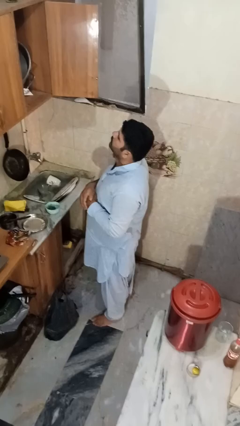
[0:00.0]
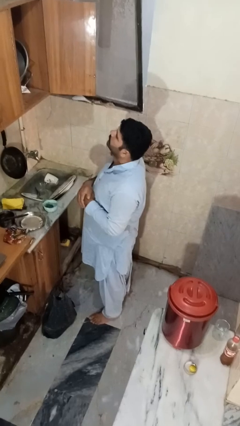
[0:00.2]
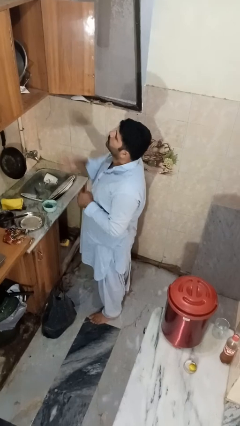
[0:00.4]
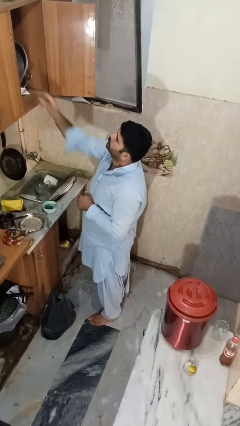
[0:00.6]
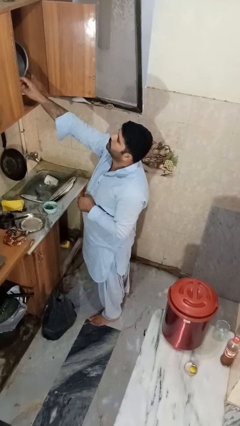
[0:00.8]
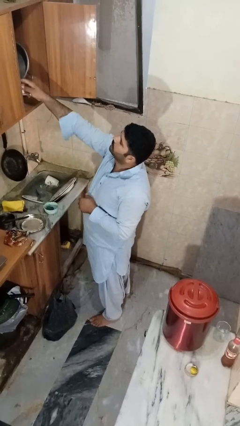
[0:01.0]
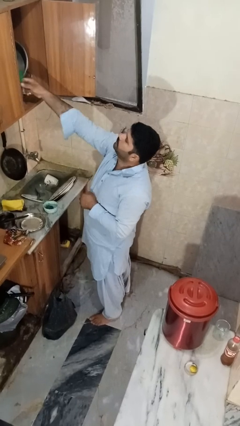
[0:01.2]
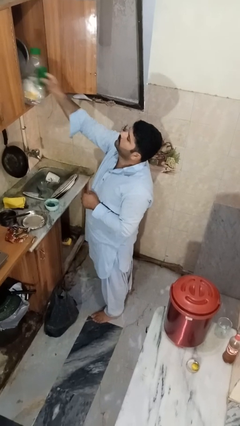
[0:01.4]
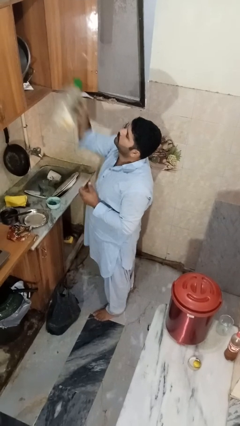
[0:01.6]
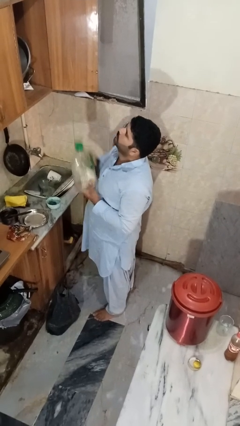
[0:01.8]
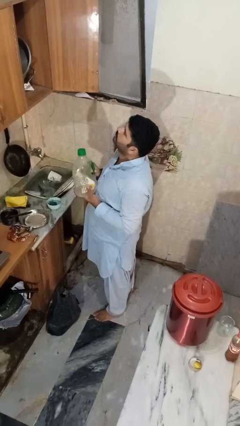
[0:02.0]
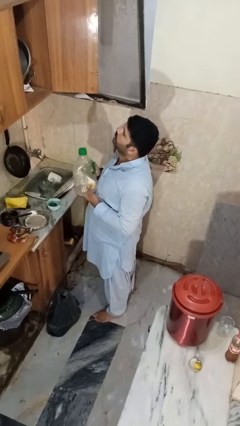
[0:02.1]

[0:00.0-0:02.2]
person takes object from cabinet

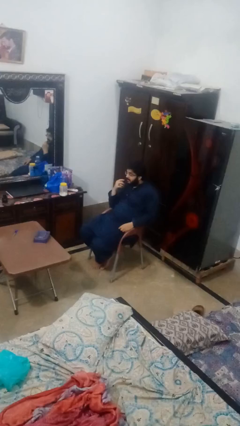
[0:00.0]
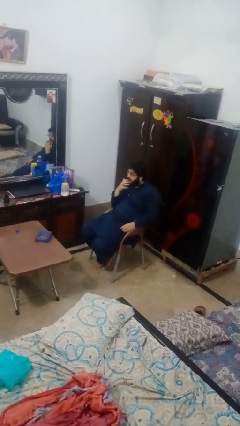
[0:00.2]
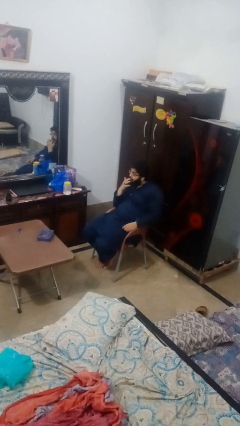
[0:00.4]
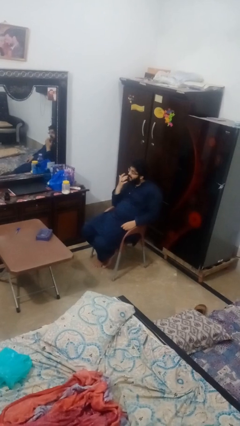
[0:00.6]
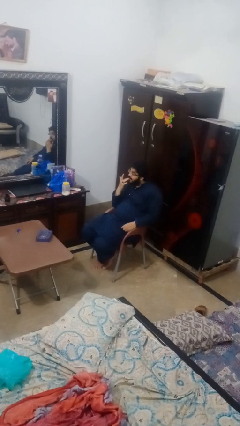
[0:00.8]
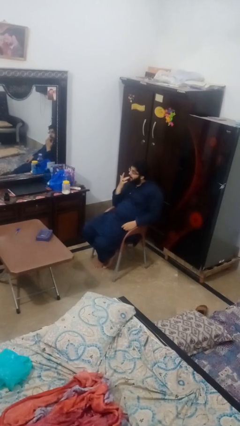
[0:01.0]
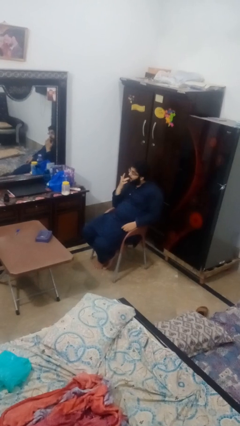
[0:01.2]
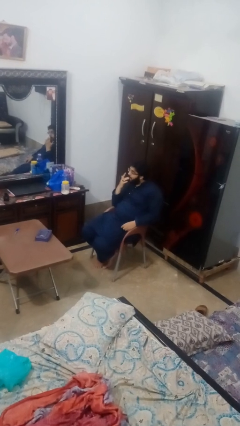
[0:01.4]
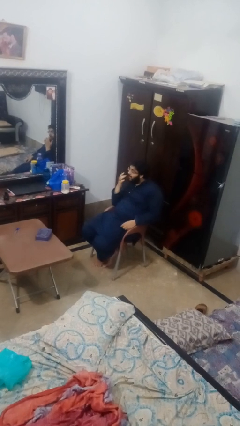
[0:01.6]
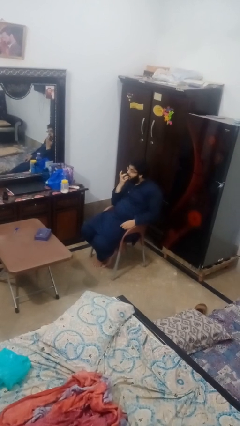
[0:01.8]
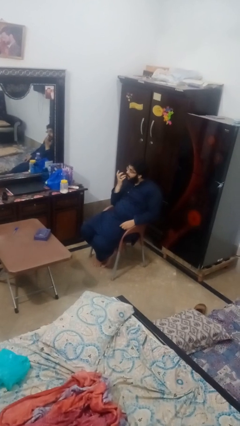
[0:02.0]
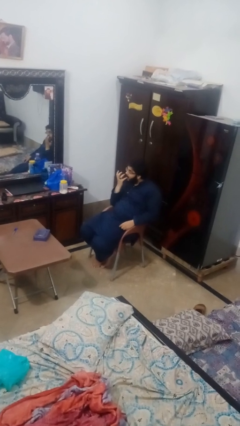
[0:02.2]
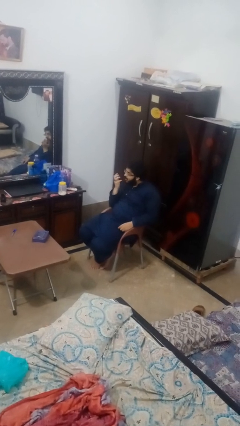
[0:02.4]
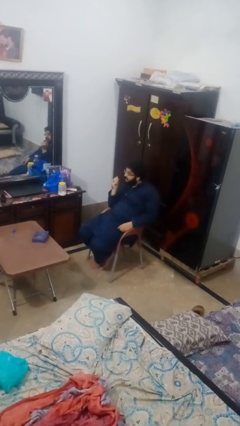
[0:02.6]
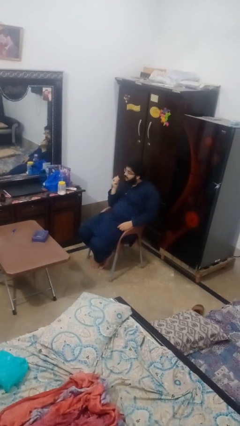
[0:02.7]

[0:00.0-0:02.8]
person licks fingers

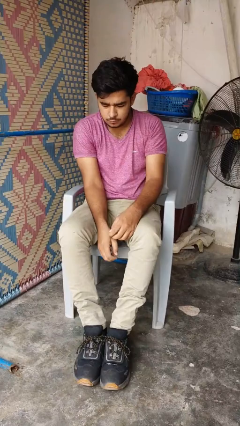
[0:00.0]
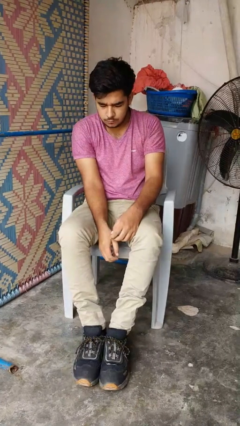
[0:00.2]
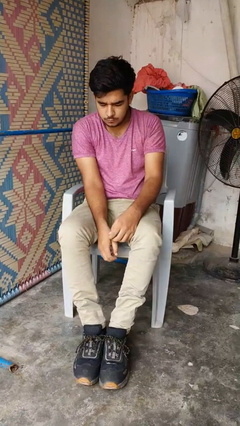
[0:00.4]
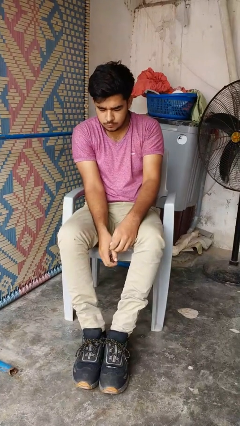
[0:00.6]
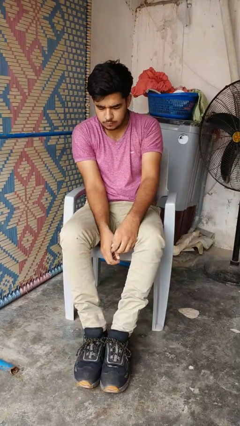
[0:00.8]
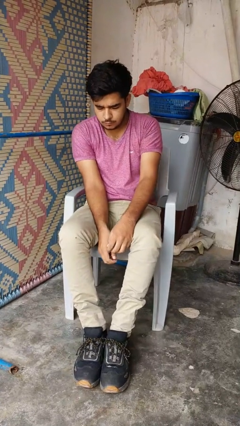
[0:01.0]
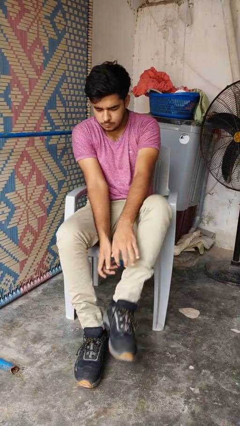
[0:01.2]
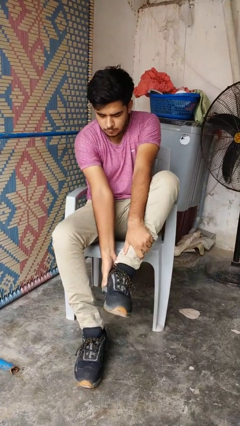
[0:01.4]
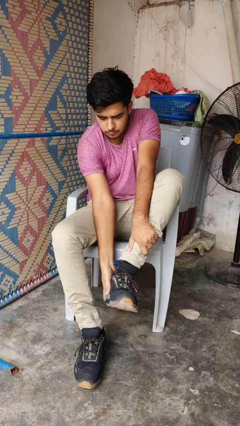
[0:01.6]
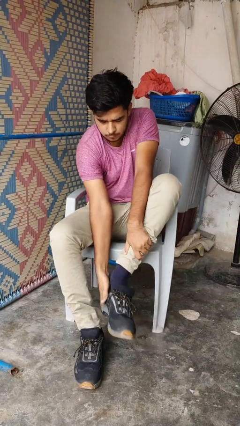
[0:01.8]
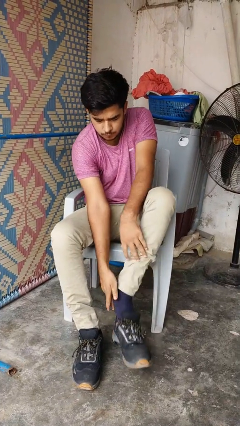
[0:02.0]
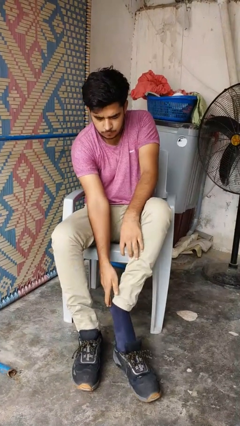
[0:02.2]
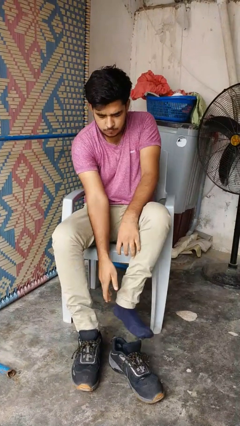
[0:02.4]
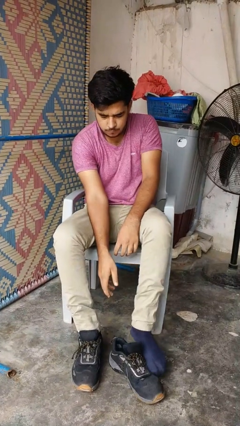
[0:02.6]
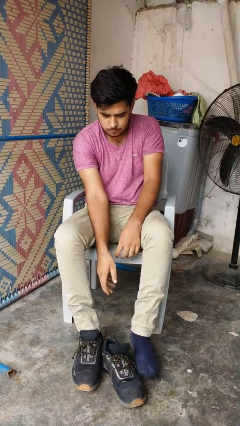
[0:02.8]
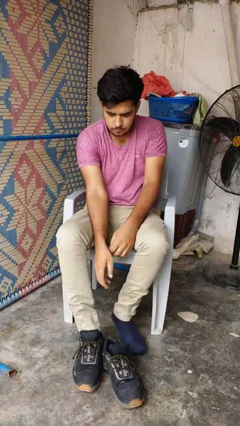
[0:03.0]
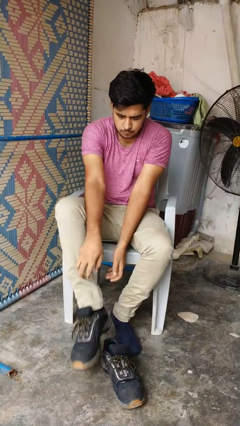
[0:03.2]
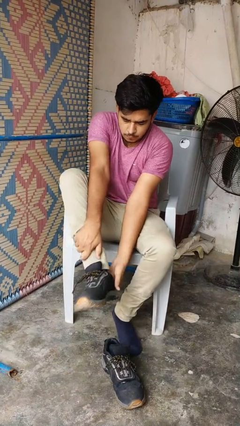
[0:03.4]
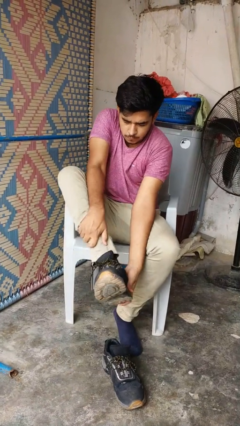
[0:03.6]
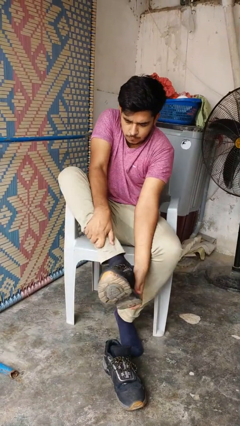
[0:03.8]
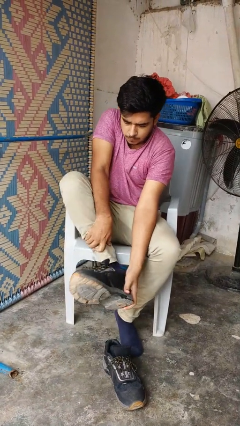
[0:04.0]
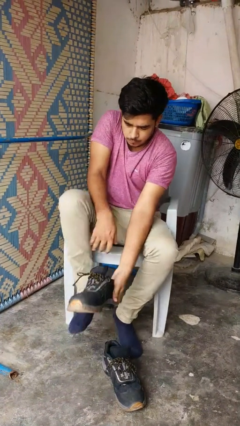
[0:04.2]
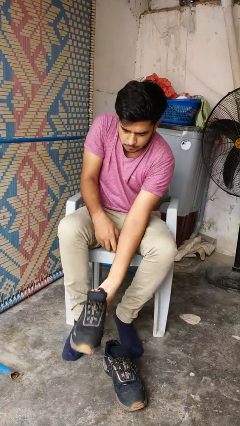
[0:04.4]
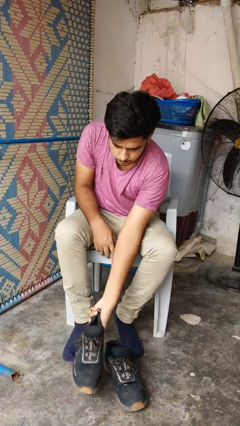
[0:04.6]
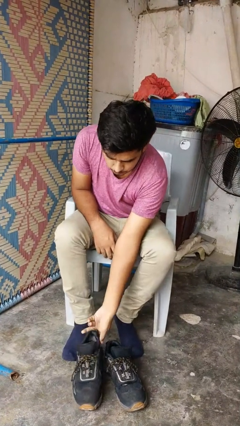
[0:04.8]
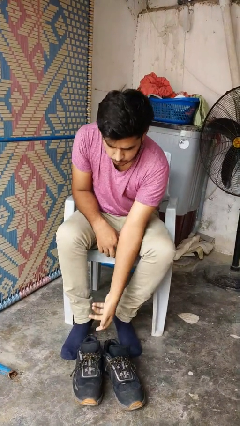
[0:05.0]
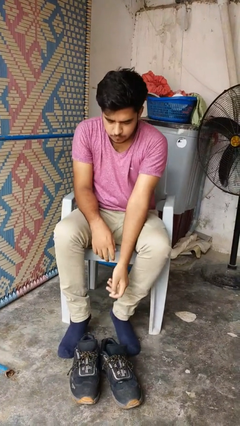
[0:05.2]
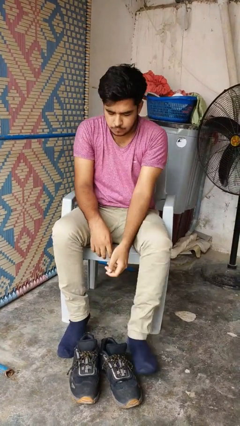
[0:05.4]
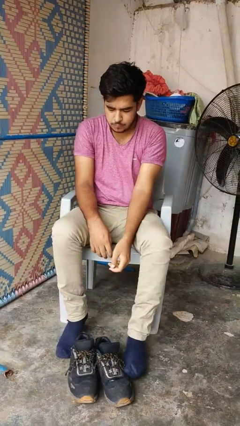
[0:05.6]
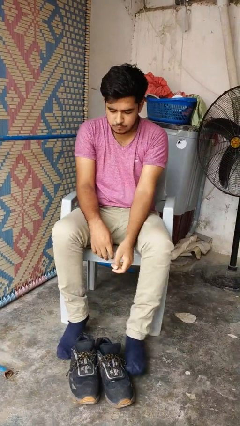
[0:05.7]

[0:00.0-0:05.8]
person takes off boots

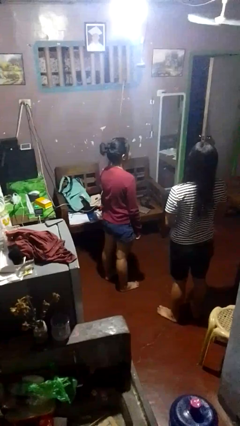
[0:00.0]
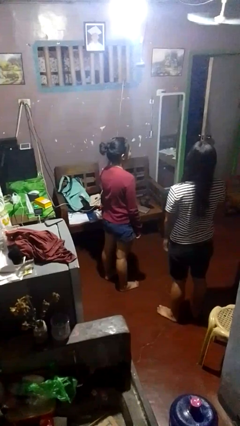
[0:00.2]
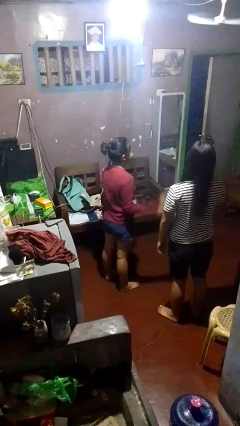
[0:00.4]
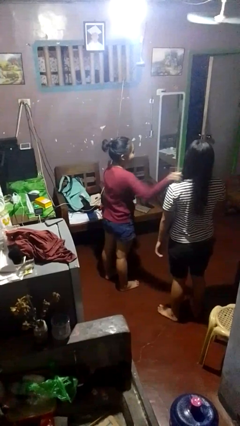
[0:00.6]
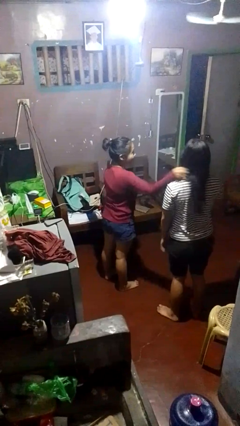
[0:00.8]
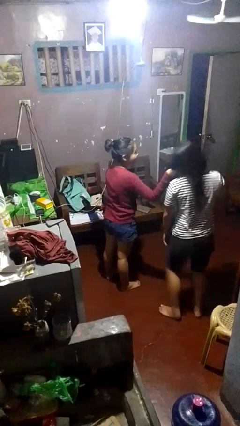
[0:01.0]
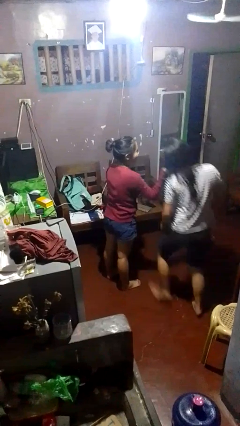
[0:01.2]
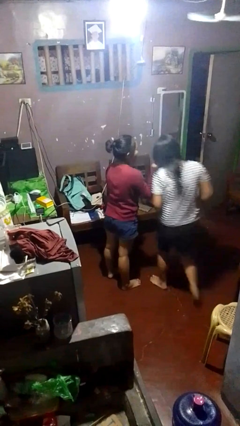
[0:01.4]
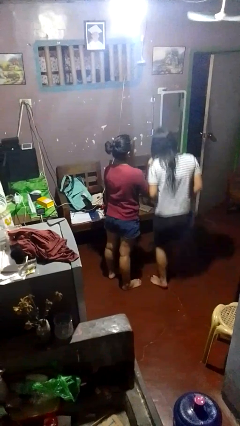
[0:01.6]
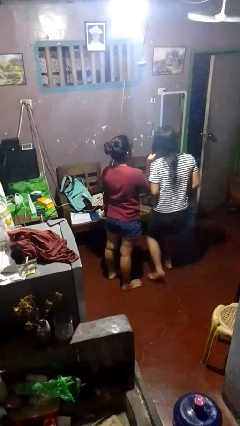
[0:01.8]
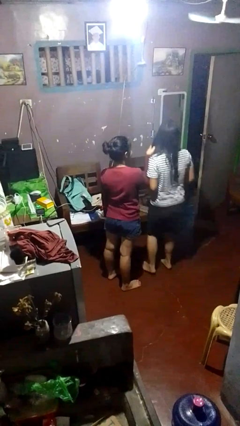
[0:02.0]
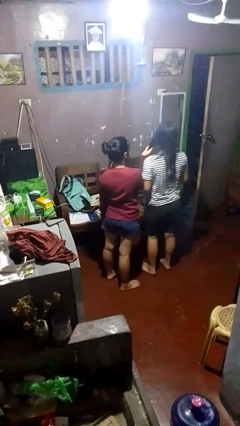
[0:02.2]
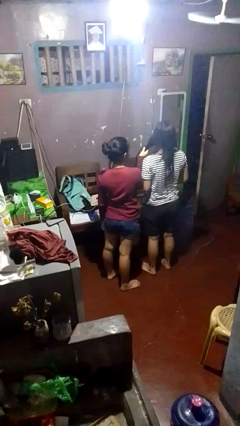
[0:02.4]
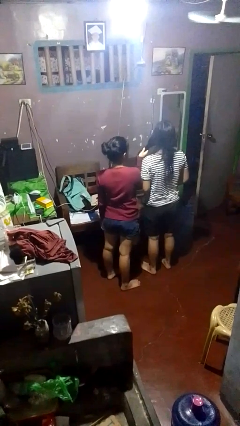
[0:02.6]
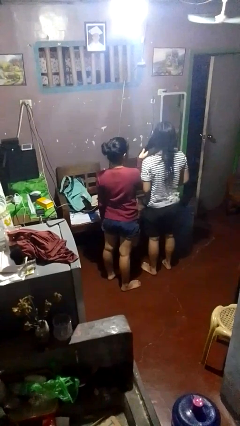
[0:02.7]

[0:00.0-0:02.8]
person grabs person by hair

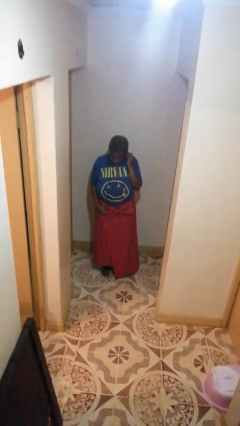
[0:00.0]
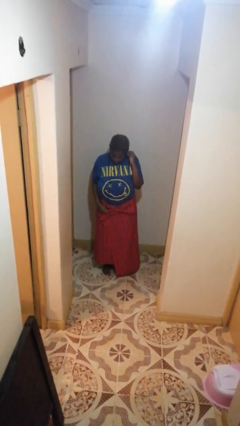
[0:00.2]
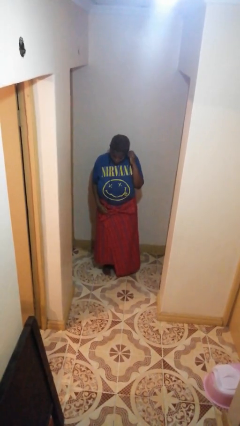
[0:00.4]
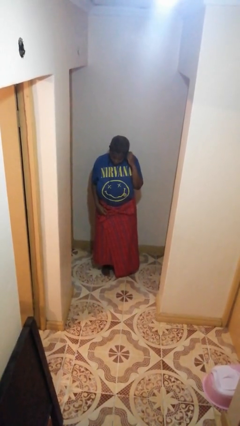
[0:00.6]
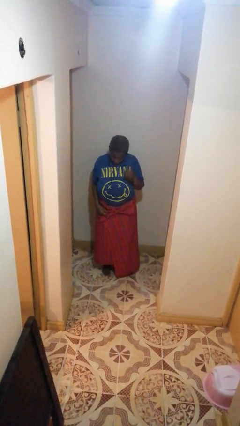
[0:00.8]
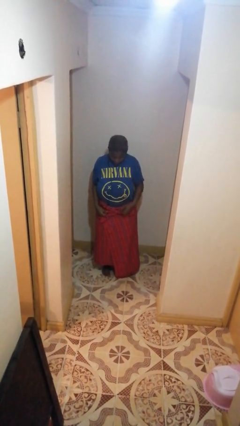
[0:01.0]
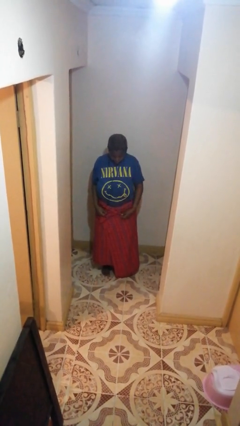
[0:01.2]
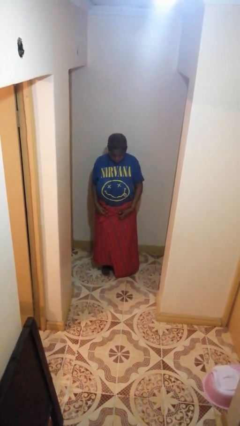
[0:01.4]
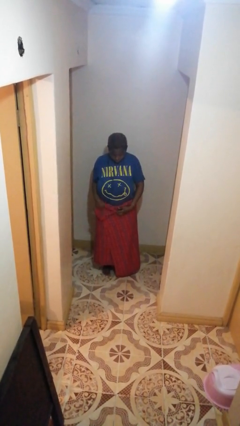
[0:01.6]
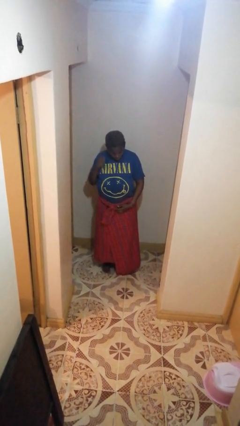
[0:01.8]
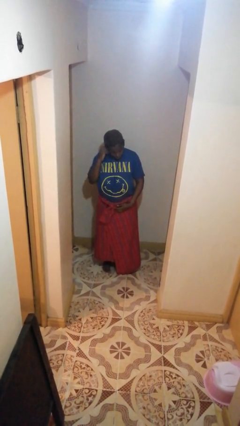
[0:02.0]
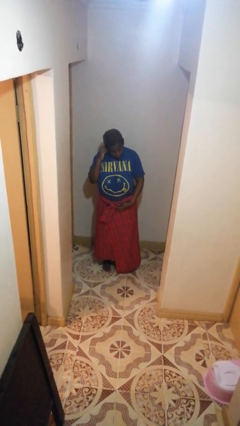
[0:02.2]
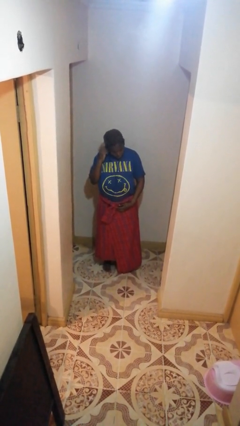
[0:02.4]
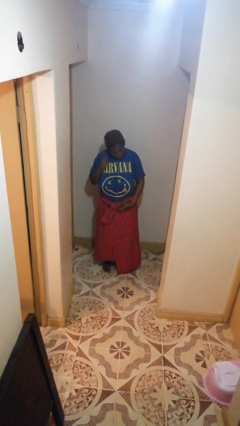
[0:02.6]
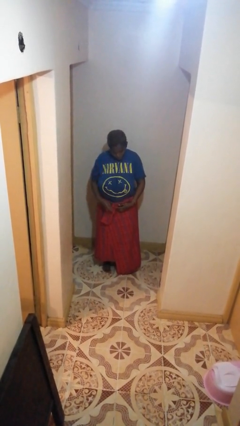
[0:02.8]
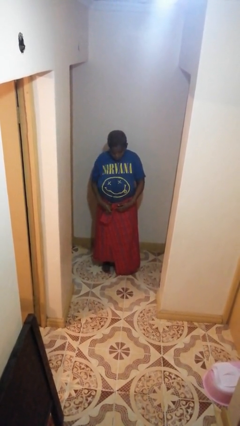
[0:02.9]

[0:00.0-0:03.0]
person takes off headphones

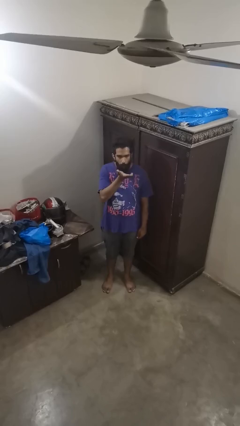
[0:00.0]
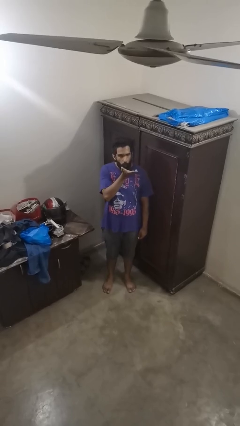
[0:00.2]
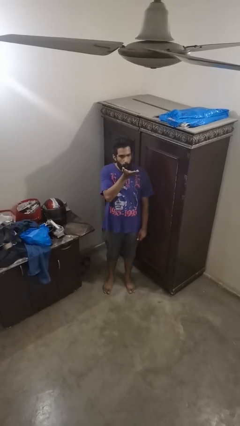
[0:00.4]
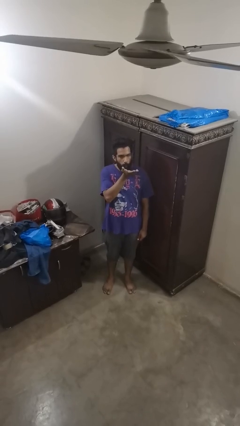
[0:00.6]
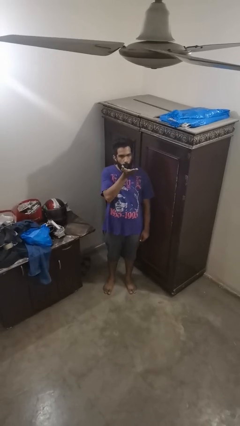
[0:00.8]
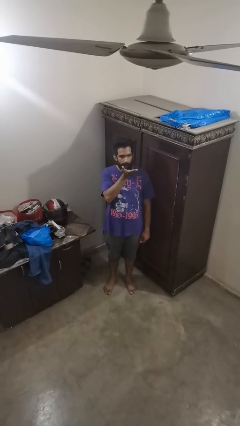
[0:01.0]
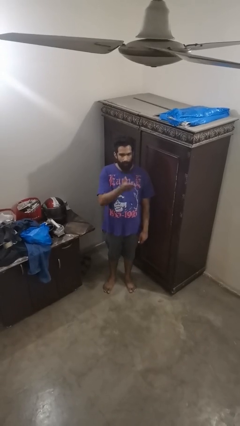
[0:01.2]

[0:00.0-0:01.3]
person gestures blow kiss
